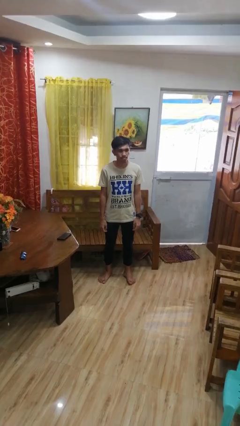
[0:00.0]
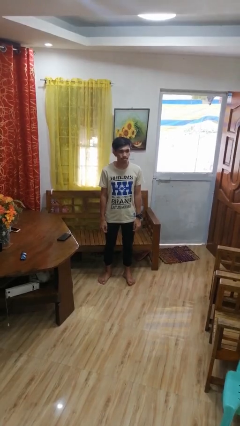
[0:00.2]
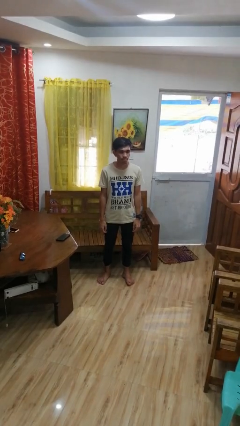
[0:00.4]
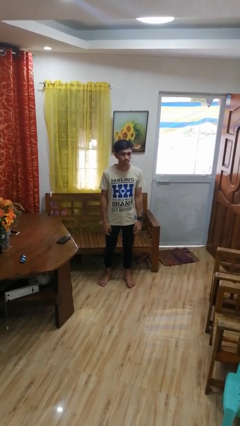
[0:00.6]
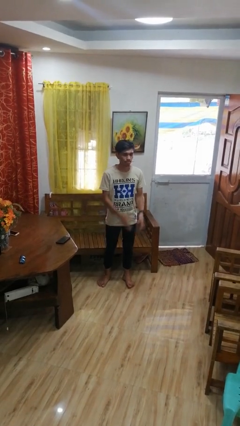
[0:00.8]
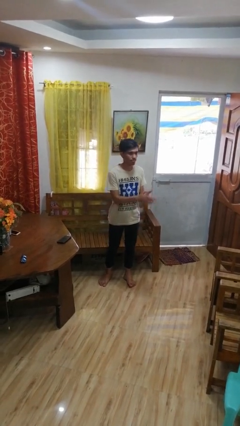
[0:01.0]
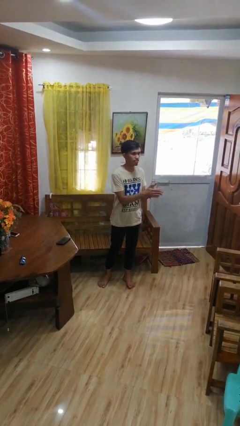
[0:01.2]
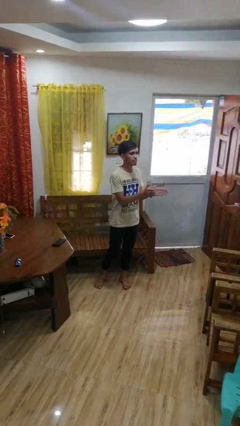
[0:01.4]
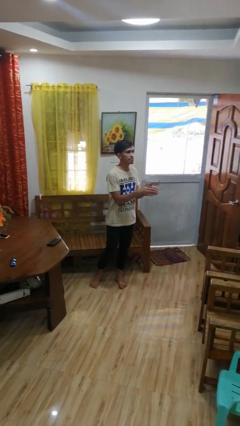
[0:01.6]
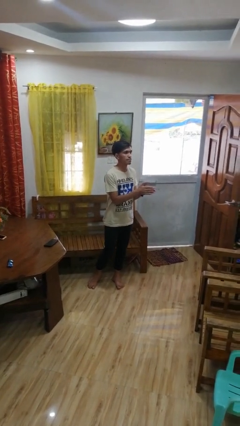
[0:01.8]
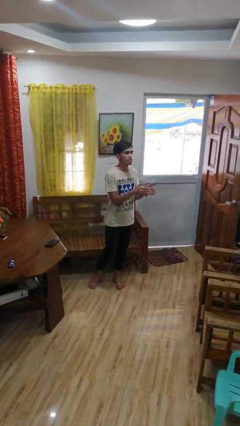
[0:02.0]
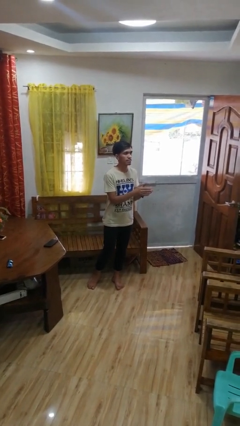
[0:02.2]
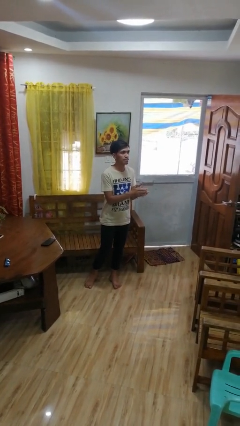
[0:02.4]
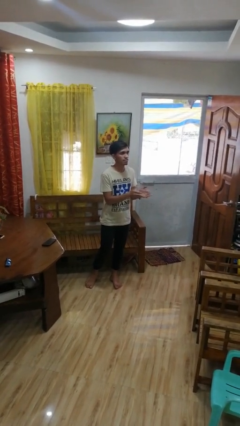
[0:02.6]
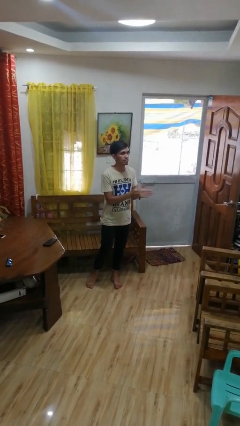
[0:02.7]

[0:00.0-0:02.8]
person claps hands

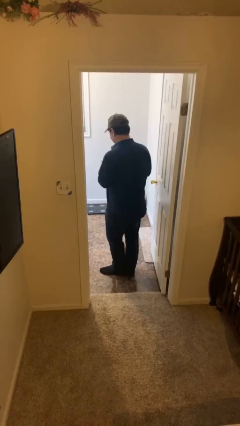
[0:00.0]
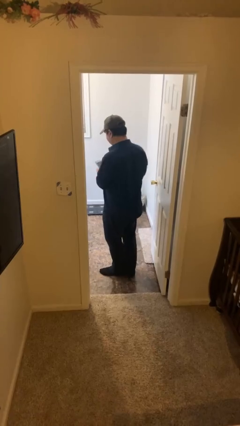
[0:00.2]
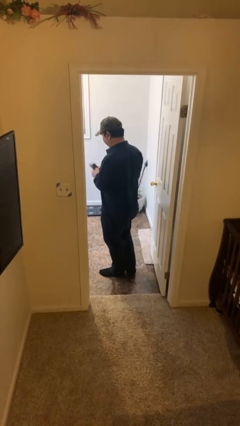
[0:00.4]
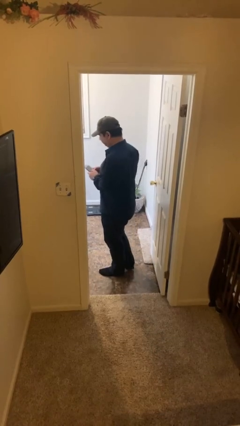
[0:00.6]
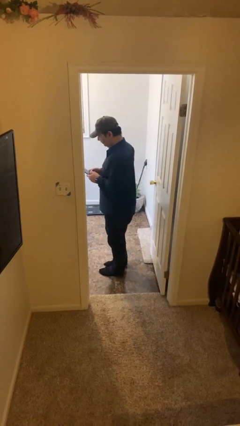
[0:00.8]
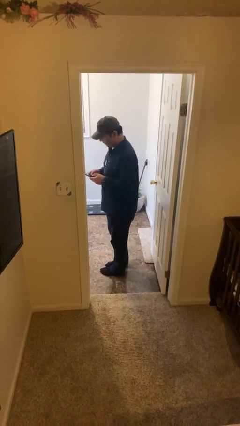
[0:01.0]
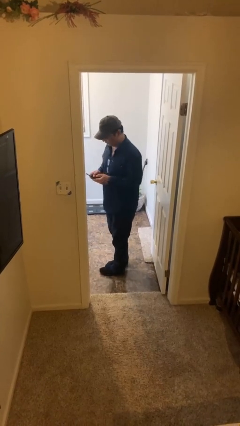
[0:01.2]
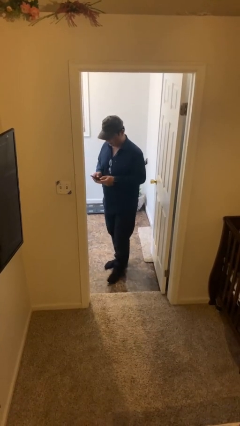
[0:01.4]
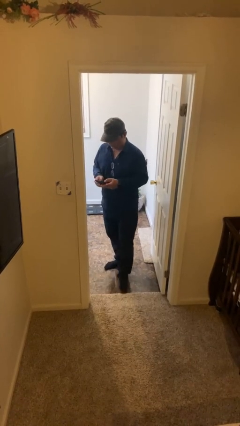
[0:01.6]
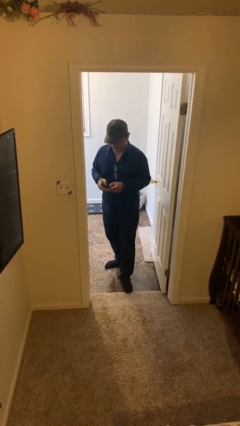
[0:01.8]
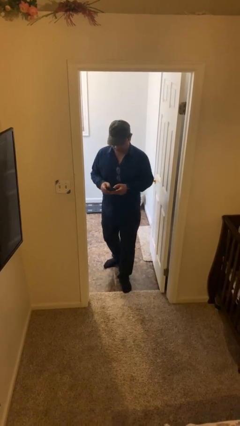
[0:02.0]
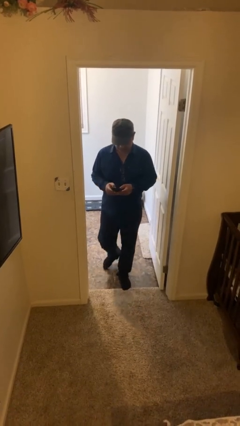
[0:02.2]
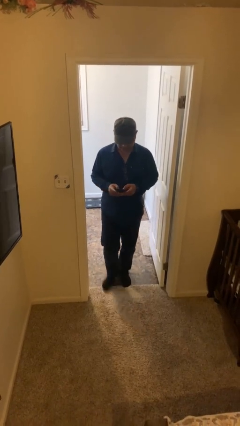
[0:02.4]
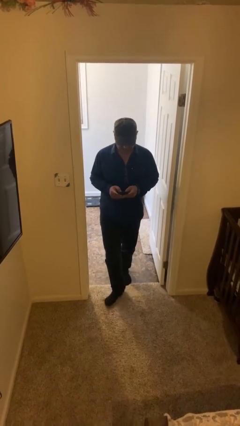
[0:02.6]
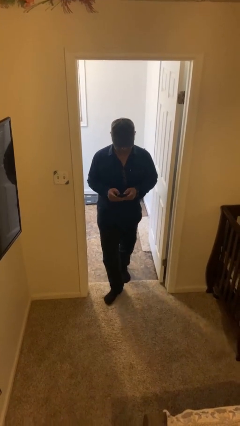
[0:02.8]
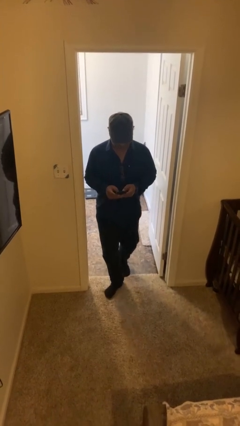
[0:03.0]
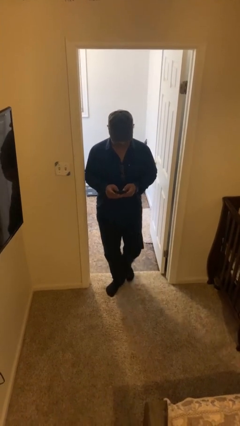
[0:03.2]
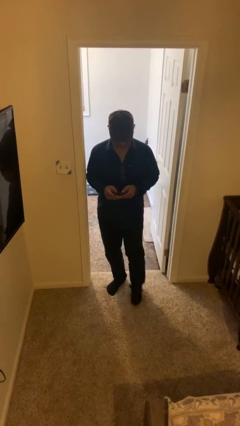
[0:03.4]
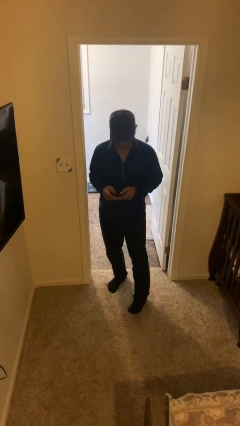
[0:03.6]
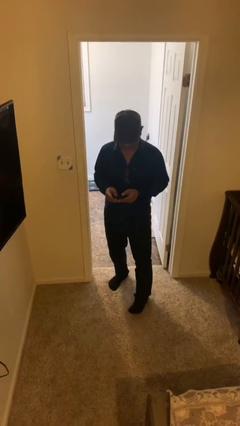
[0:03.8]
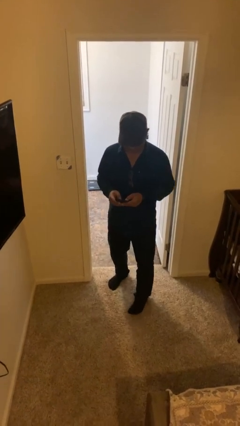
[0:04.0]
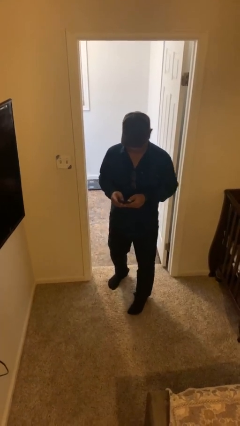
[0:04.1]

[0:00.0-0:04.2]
person enters scene through structure

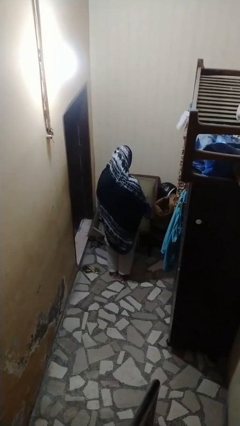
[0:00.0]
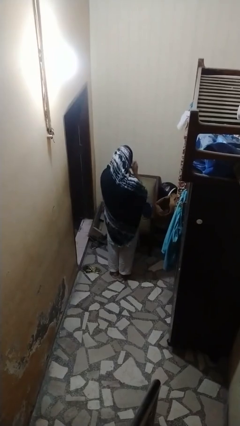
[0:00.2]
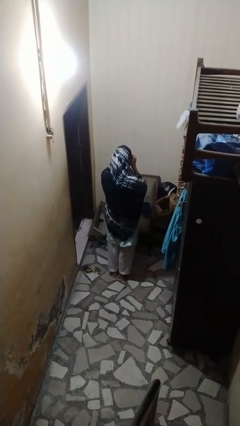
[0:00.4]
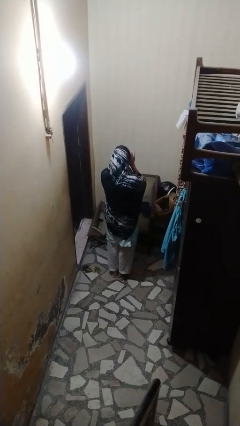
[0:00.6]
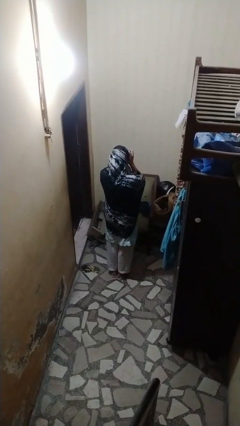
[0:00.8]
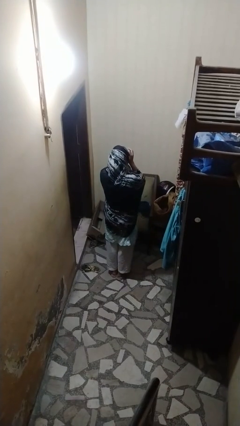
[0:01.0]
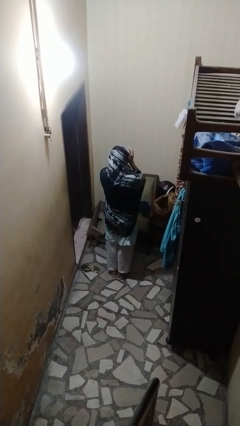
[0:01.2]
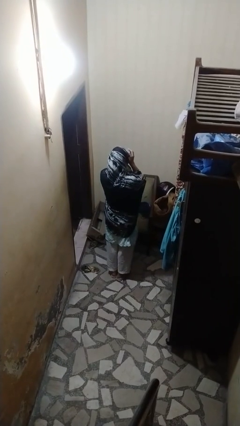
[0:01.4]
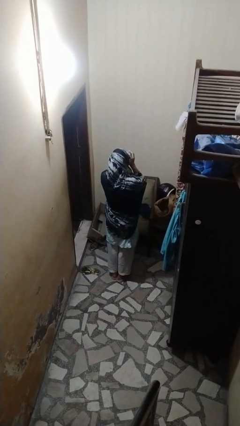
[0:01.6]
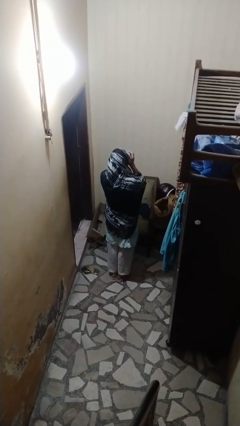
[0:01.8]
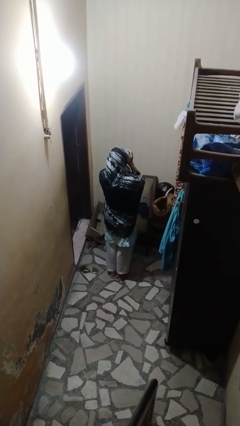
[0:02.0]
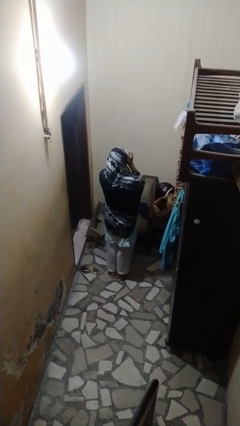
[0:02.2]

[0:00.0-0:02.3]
person drinks from mug

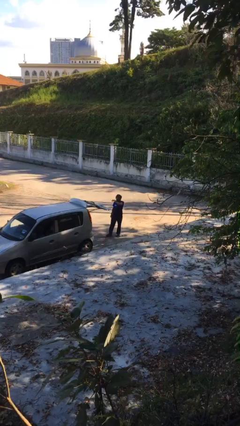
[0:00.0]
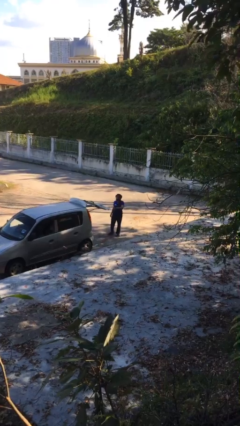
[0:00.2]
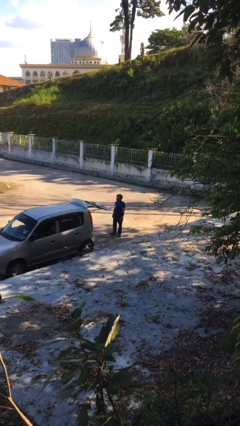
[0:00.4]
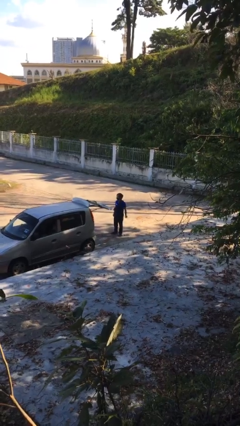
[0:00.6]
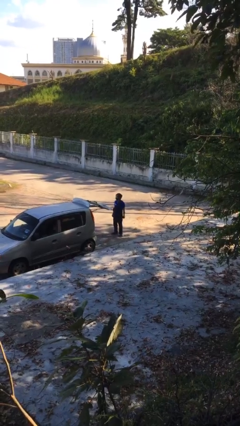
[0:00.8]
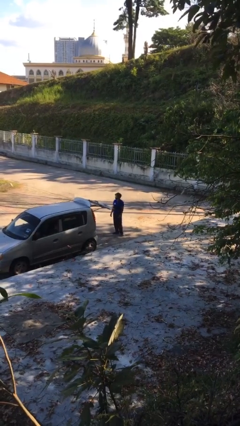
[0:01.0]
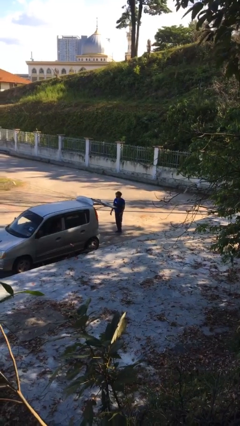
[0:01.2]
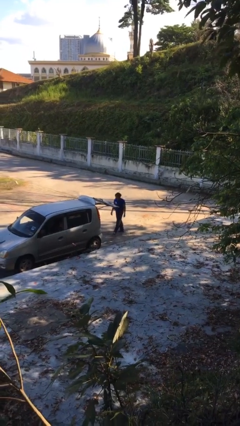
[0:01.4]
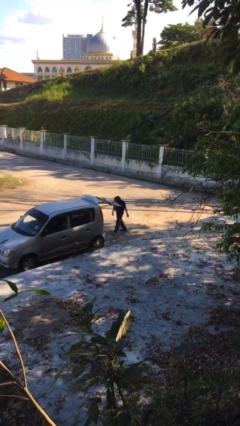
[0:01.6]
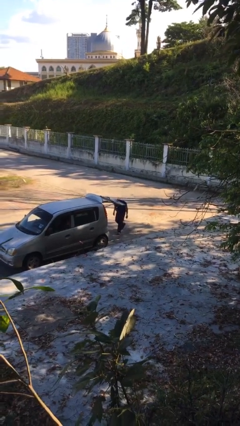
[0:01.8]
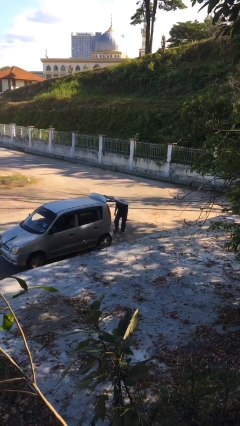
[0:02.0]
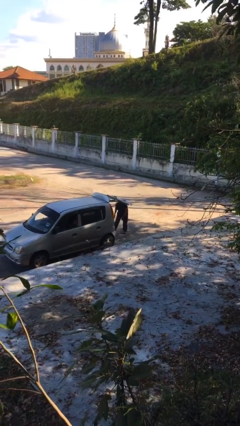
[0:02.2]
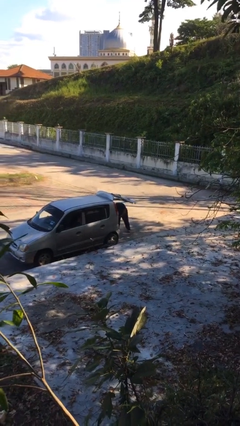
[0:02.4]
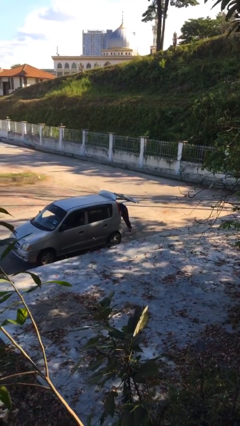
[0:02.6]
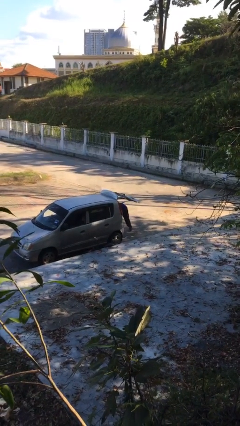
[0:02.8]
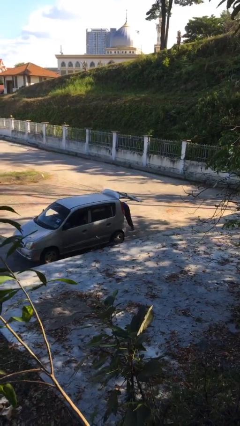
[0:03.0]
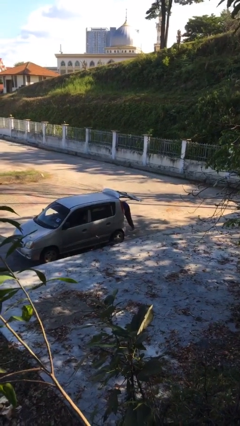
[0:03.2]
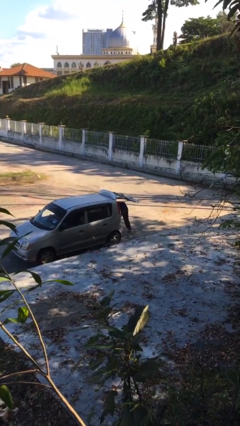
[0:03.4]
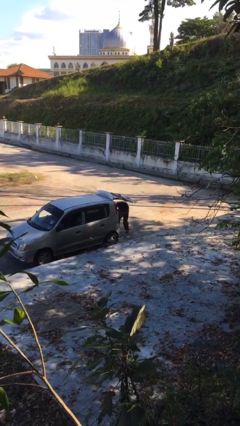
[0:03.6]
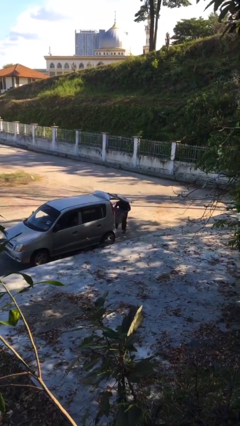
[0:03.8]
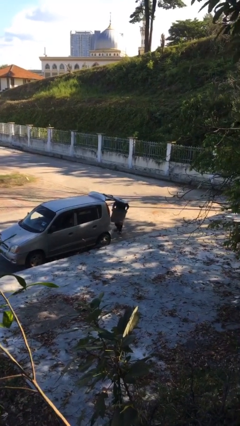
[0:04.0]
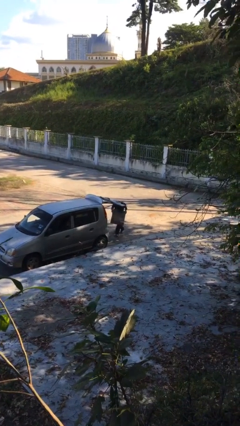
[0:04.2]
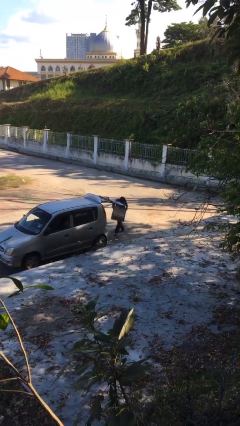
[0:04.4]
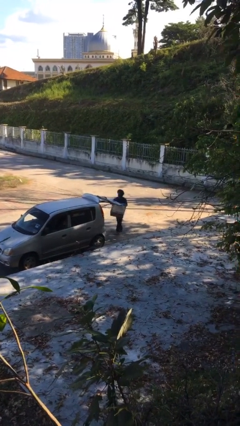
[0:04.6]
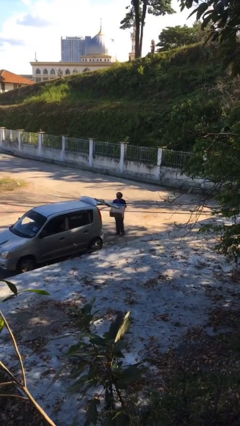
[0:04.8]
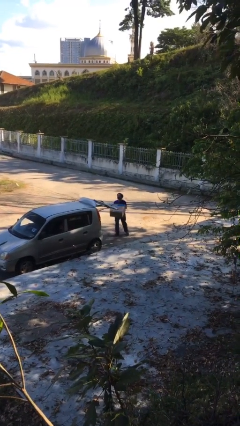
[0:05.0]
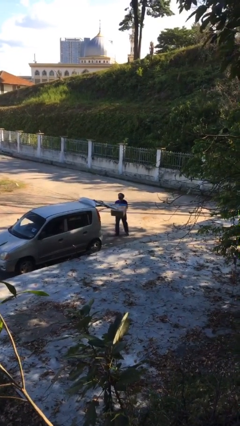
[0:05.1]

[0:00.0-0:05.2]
person unloads car

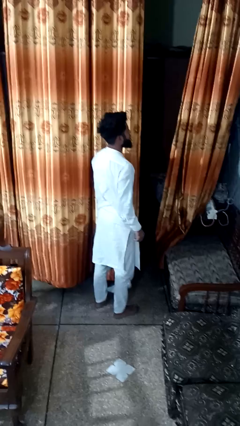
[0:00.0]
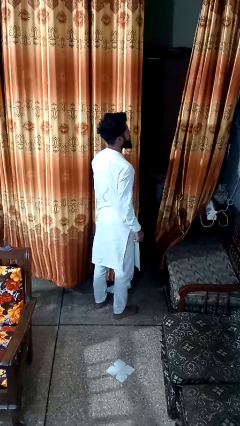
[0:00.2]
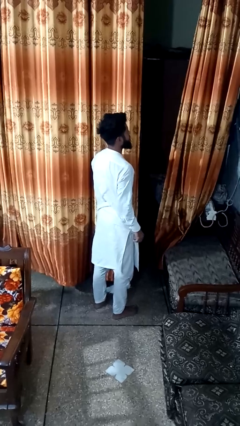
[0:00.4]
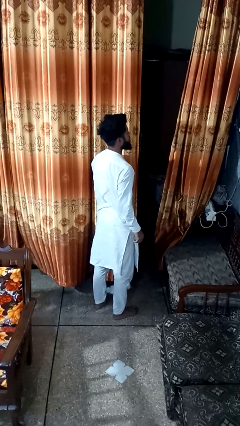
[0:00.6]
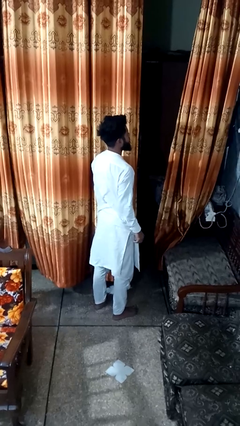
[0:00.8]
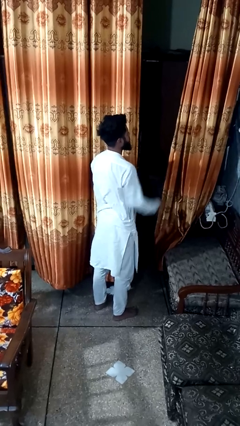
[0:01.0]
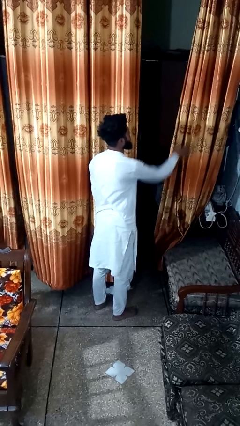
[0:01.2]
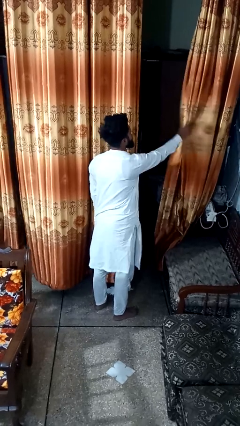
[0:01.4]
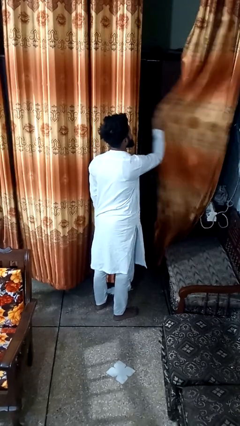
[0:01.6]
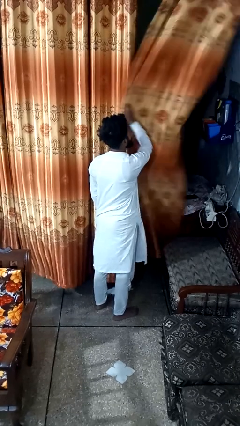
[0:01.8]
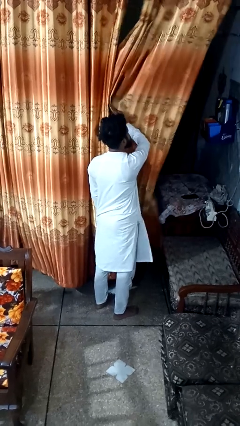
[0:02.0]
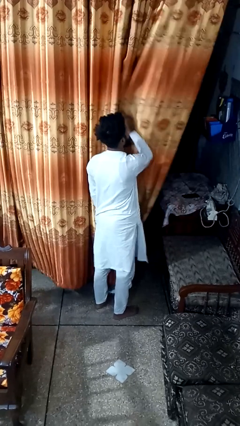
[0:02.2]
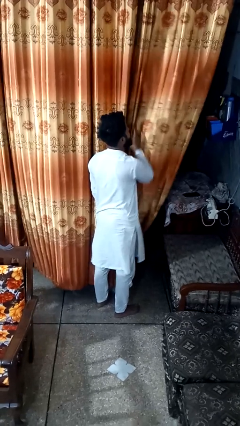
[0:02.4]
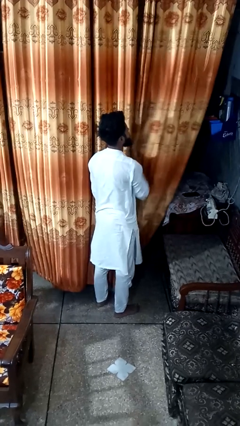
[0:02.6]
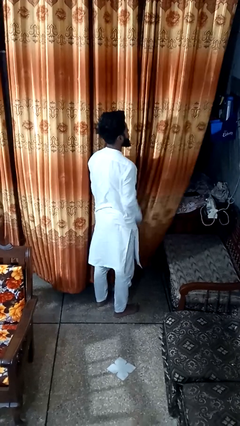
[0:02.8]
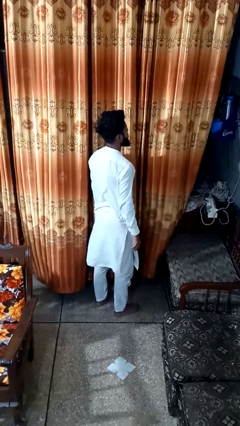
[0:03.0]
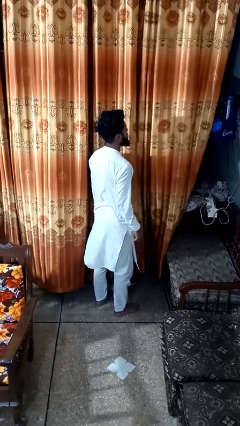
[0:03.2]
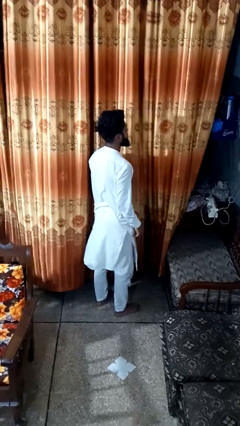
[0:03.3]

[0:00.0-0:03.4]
person closes curtains
